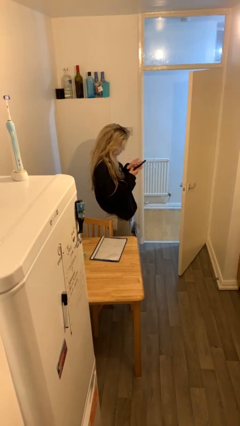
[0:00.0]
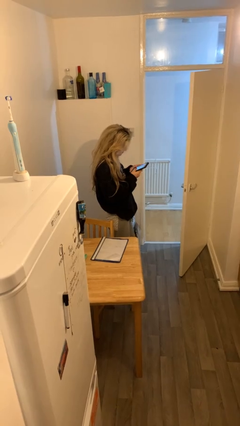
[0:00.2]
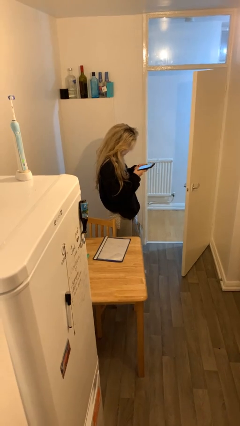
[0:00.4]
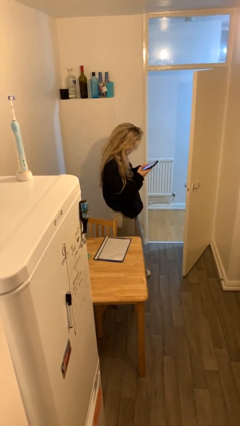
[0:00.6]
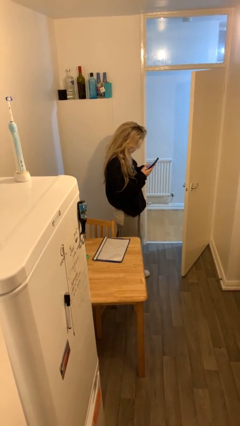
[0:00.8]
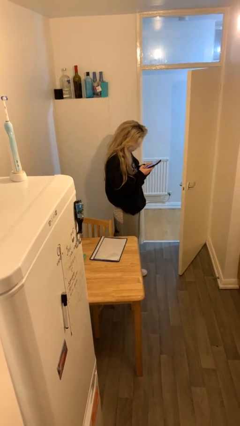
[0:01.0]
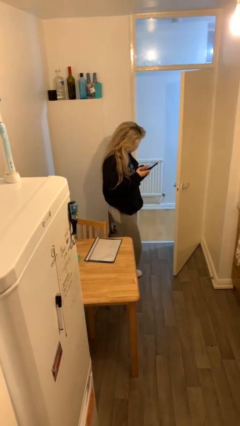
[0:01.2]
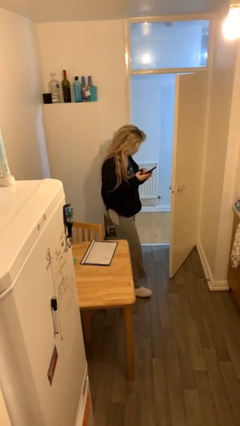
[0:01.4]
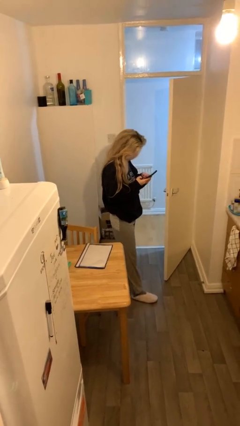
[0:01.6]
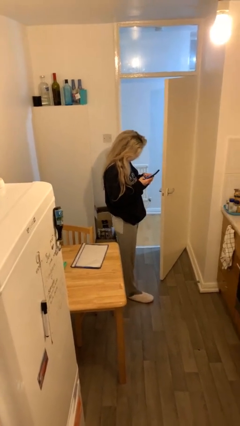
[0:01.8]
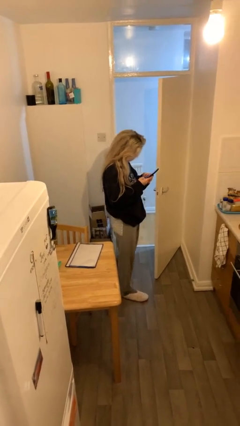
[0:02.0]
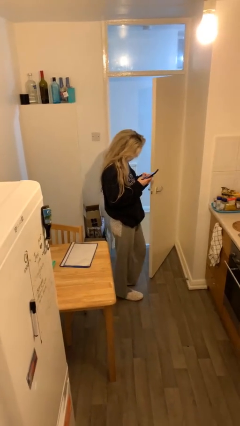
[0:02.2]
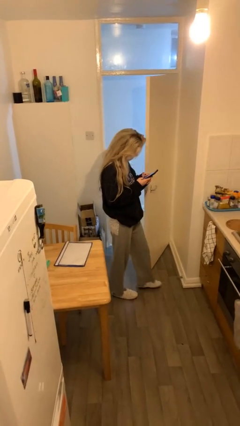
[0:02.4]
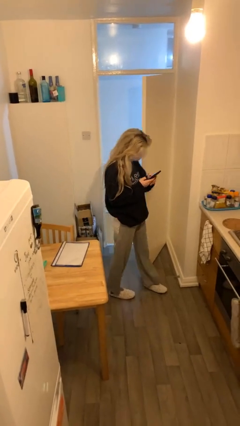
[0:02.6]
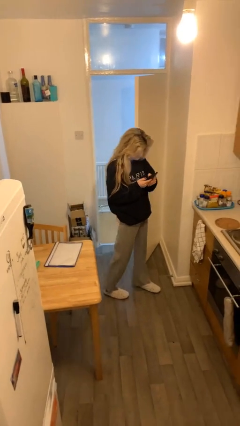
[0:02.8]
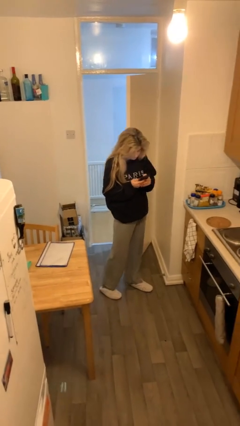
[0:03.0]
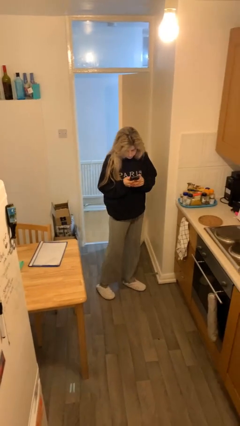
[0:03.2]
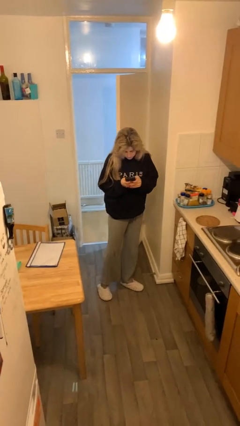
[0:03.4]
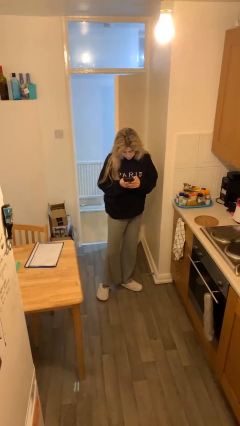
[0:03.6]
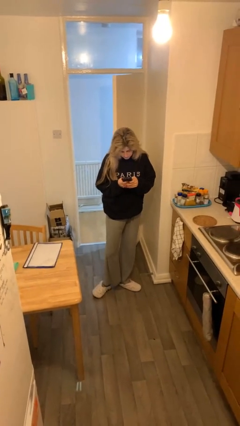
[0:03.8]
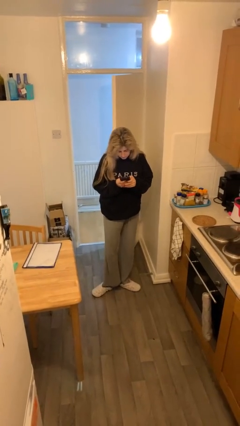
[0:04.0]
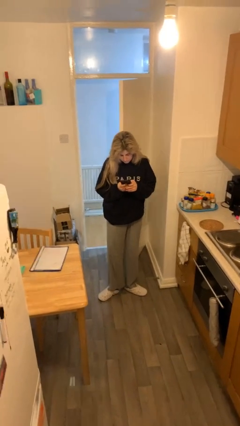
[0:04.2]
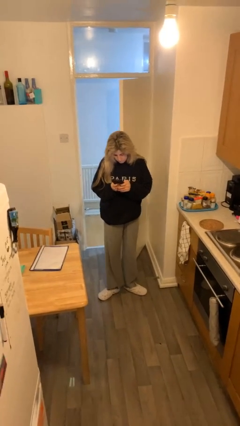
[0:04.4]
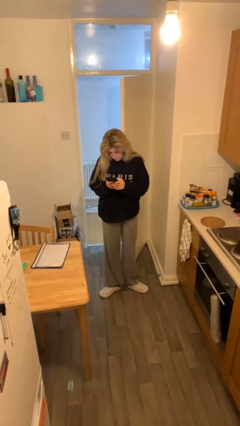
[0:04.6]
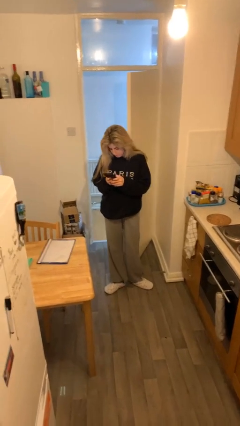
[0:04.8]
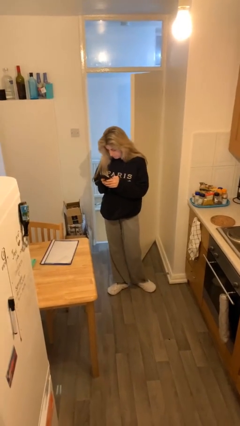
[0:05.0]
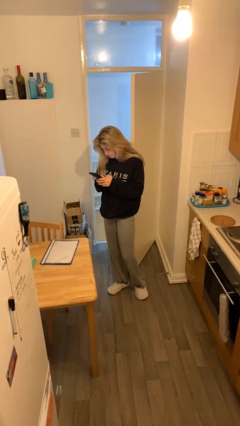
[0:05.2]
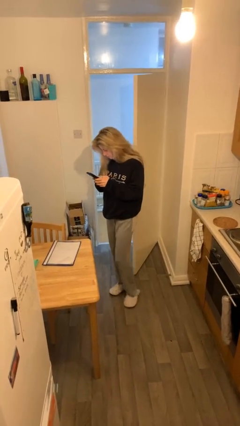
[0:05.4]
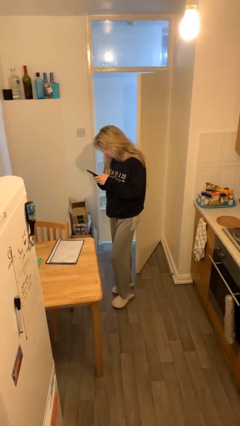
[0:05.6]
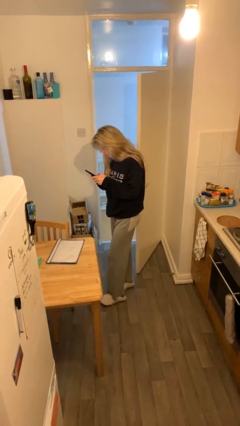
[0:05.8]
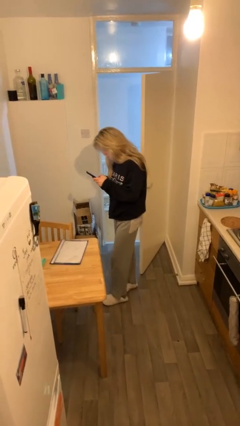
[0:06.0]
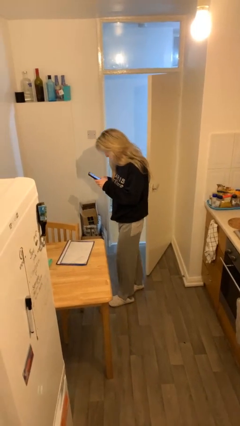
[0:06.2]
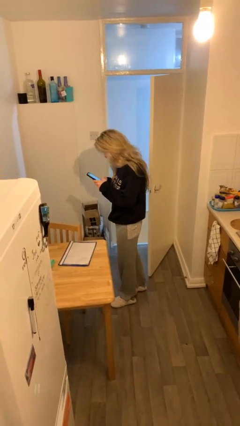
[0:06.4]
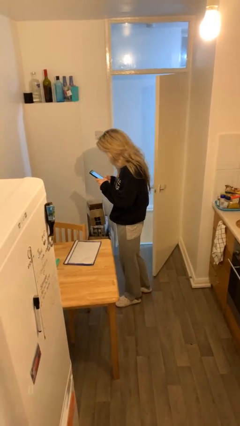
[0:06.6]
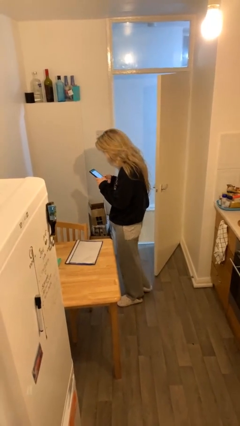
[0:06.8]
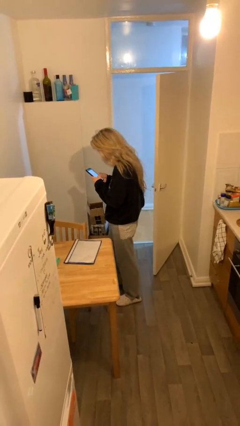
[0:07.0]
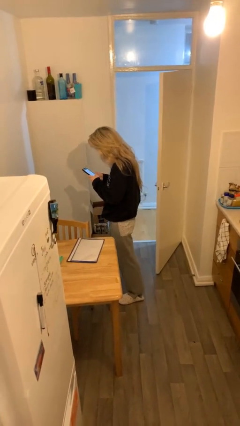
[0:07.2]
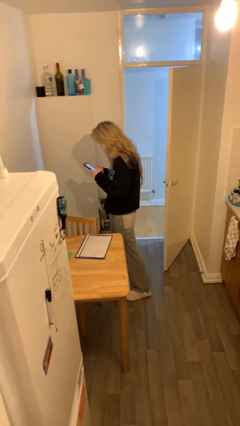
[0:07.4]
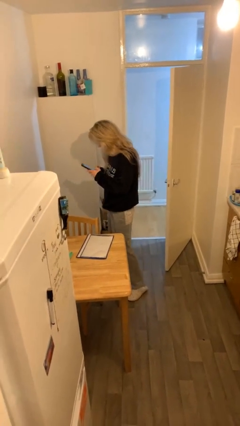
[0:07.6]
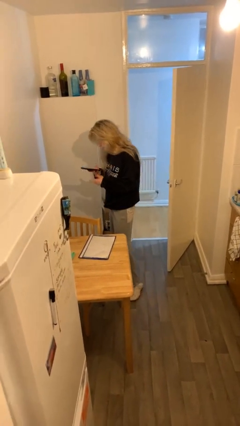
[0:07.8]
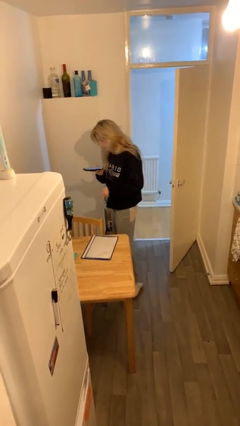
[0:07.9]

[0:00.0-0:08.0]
person texts on phone

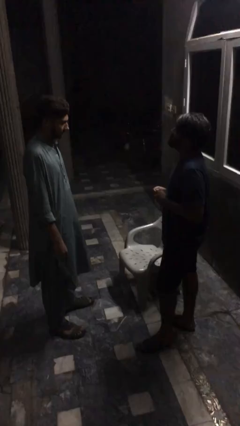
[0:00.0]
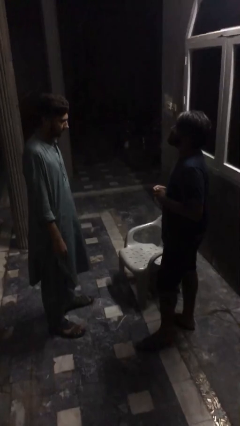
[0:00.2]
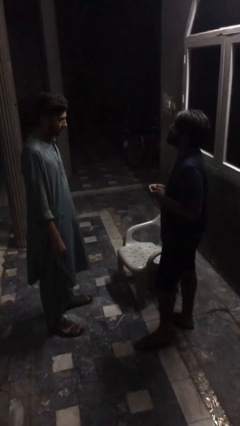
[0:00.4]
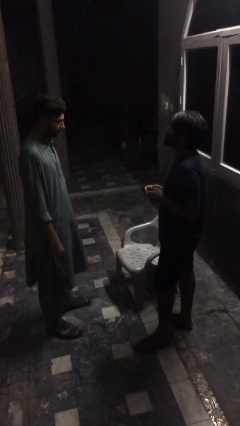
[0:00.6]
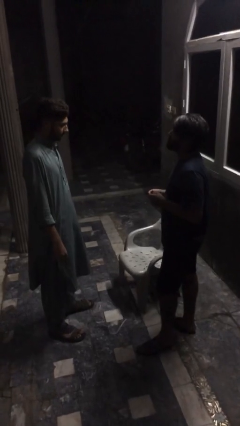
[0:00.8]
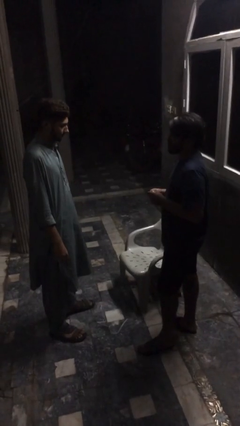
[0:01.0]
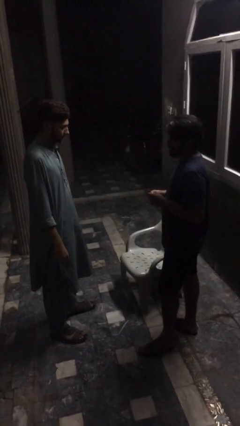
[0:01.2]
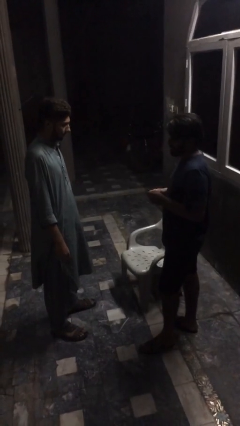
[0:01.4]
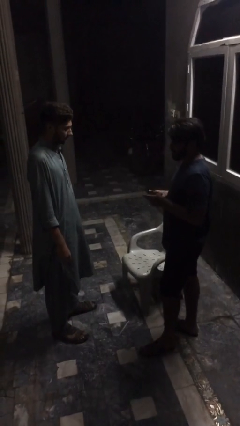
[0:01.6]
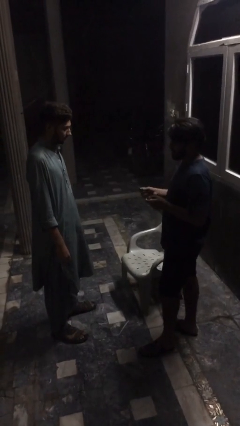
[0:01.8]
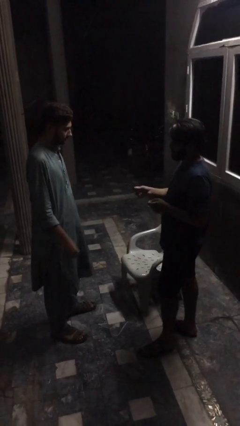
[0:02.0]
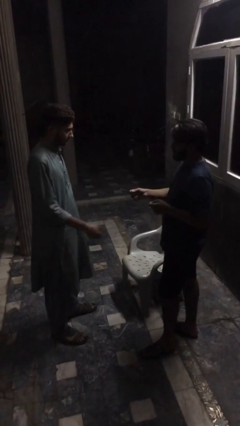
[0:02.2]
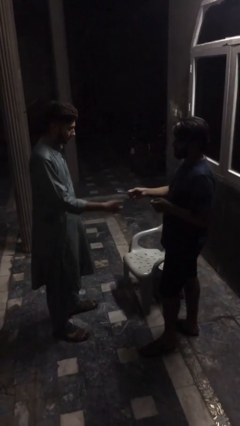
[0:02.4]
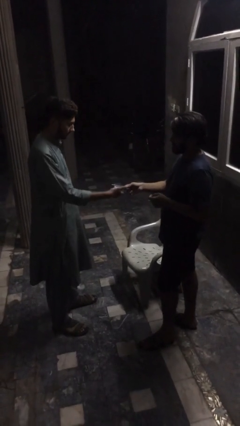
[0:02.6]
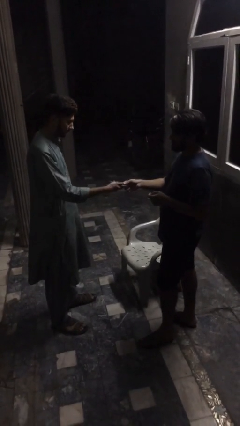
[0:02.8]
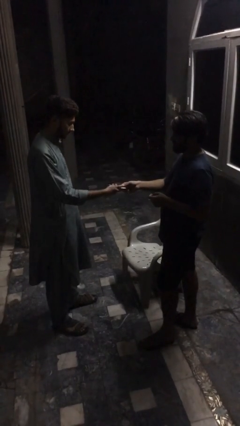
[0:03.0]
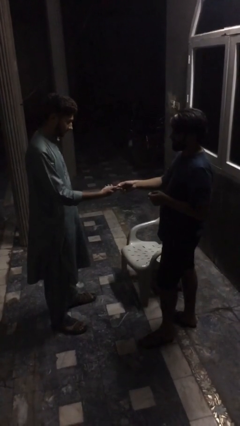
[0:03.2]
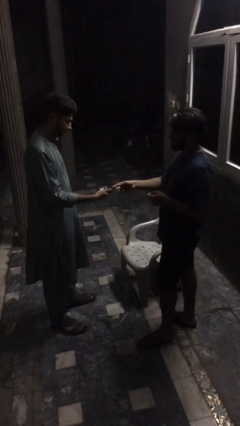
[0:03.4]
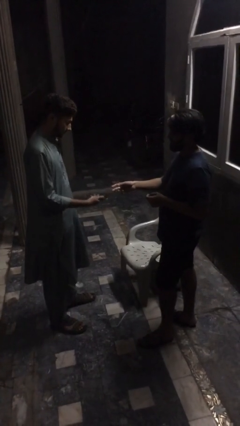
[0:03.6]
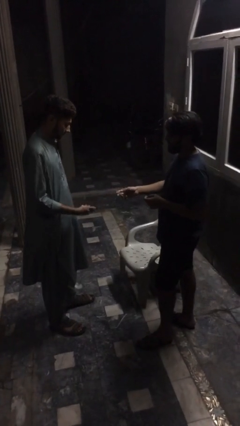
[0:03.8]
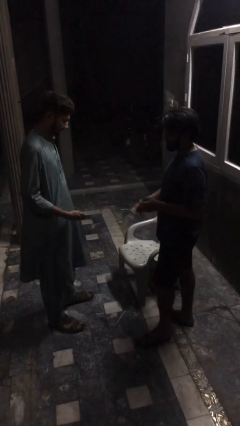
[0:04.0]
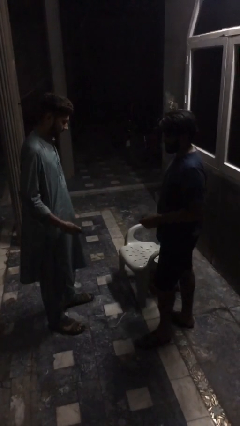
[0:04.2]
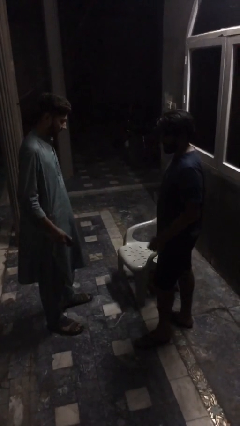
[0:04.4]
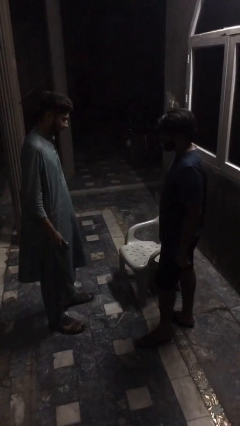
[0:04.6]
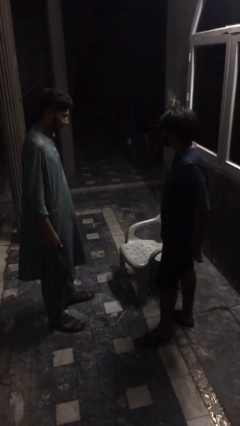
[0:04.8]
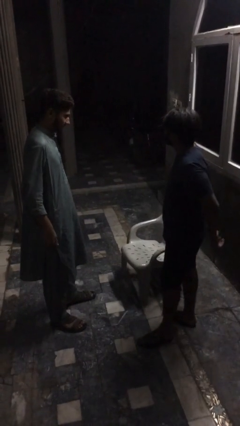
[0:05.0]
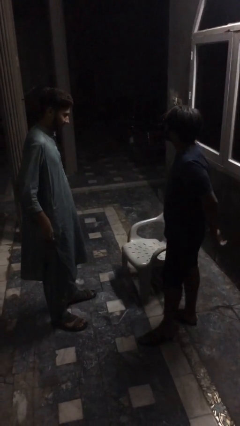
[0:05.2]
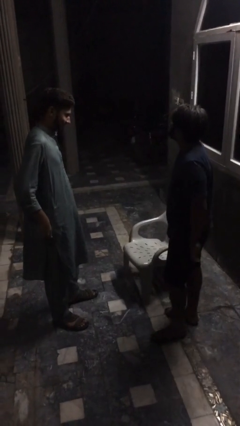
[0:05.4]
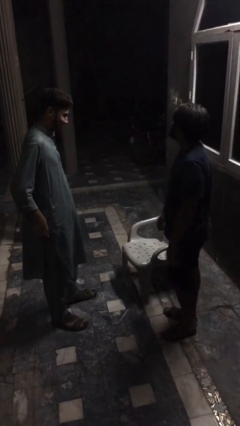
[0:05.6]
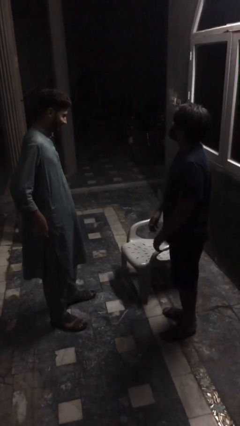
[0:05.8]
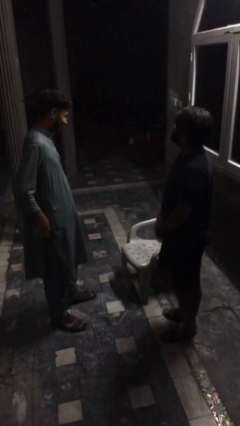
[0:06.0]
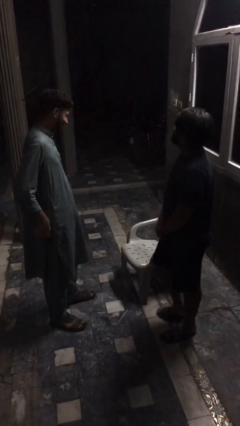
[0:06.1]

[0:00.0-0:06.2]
person transfers object to person

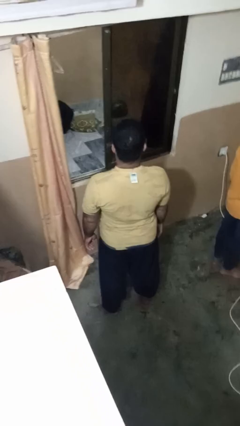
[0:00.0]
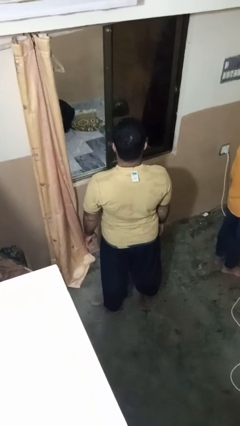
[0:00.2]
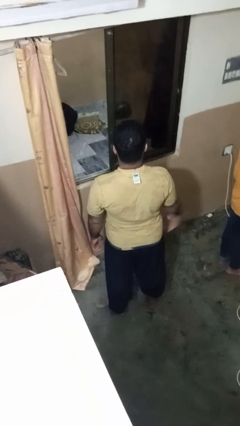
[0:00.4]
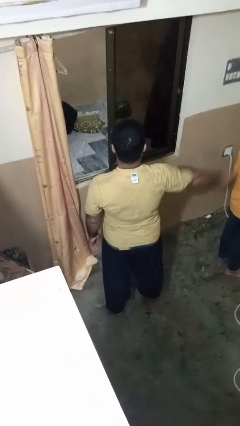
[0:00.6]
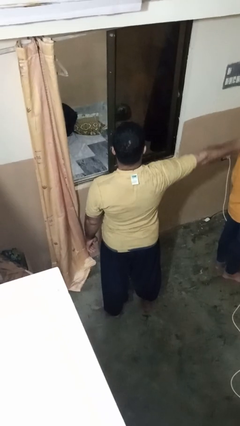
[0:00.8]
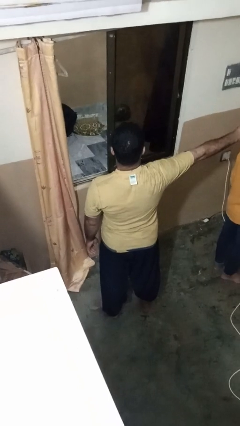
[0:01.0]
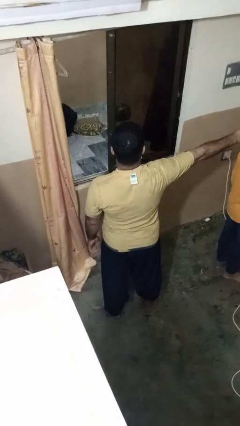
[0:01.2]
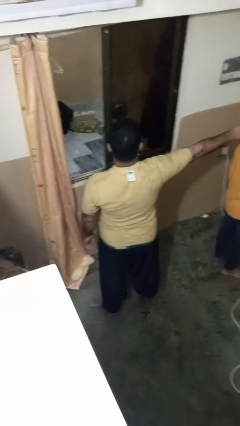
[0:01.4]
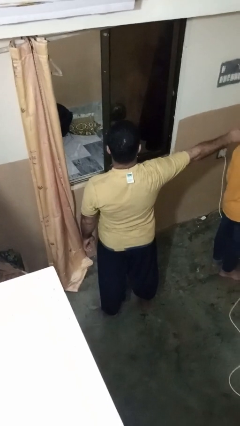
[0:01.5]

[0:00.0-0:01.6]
person points at person

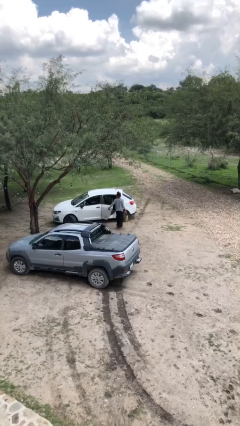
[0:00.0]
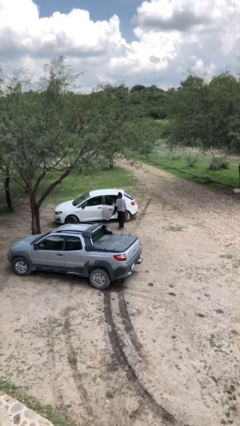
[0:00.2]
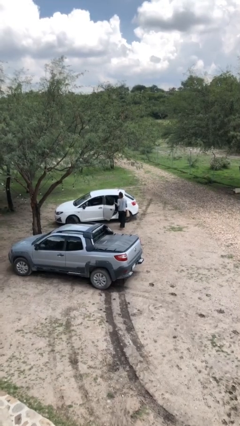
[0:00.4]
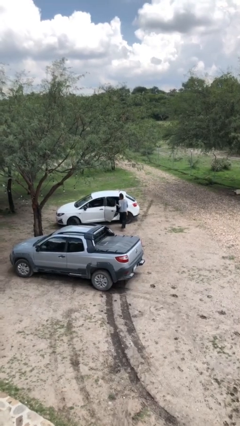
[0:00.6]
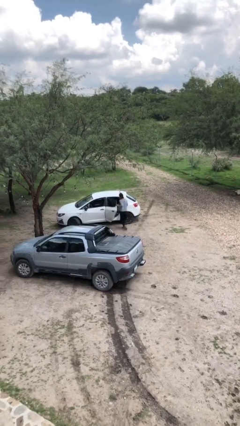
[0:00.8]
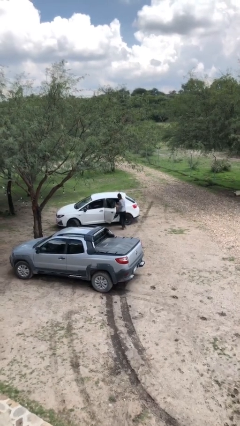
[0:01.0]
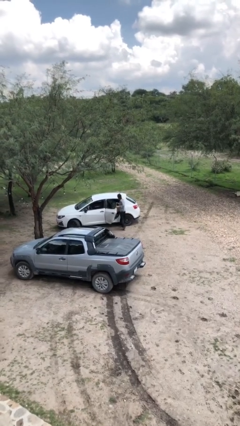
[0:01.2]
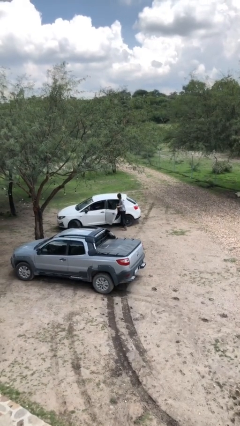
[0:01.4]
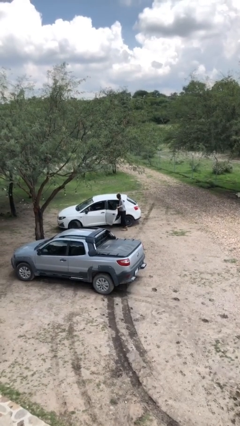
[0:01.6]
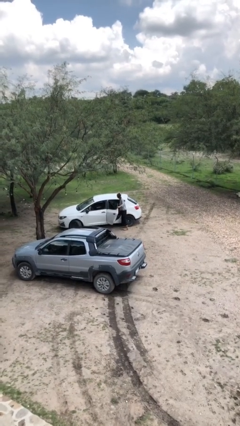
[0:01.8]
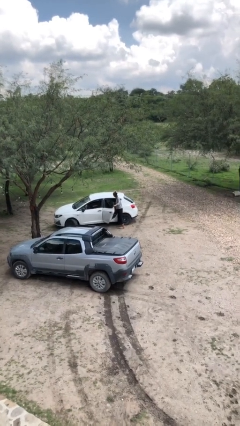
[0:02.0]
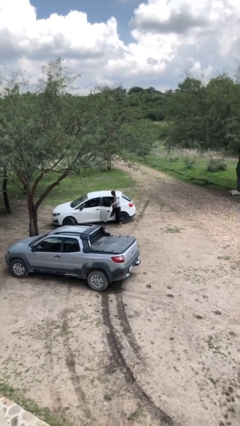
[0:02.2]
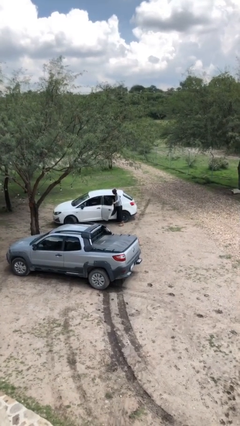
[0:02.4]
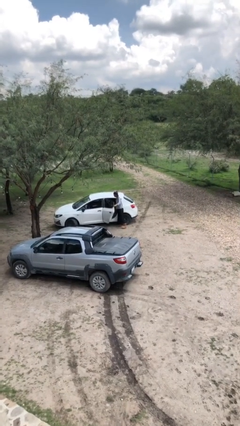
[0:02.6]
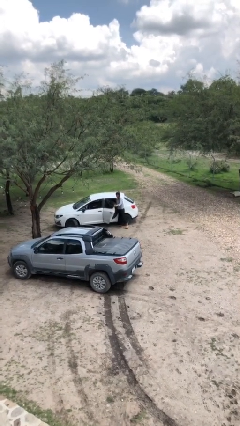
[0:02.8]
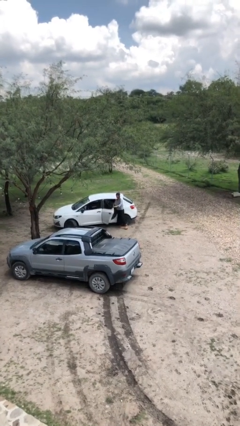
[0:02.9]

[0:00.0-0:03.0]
person loads car
